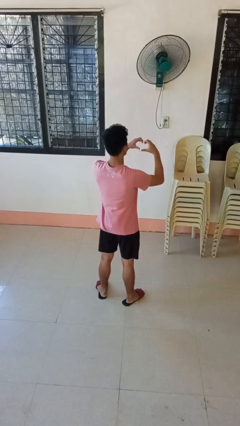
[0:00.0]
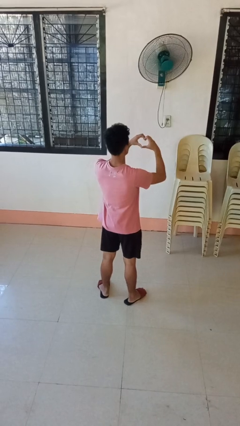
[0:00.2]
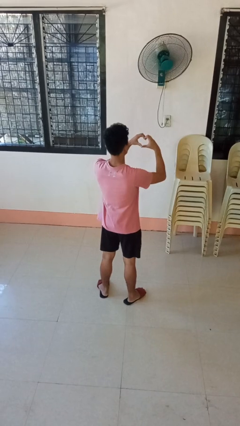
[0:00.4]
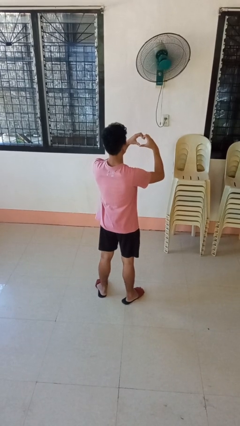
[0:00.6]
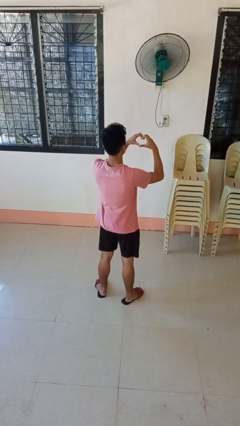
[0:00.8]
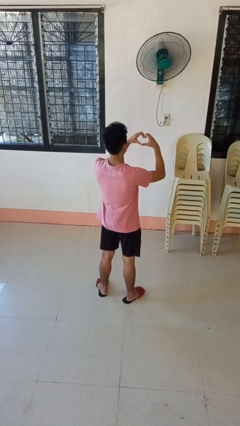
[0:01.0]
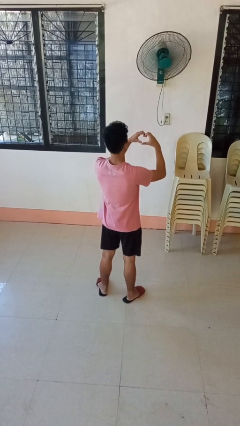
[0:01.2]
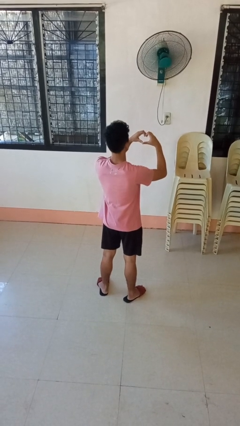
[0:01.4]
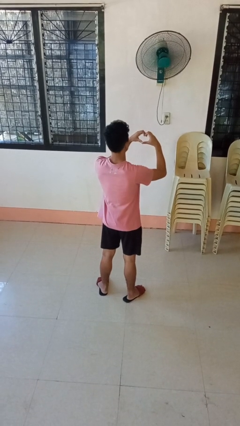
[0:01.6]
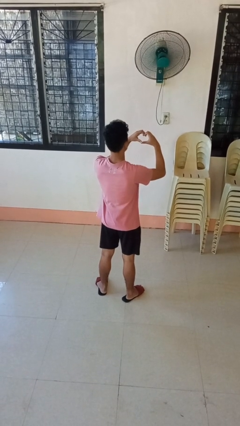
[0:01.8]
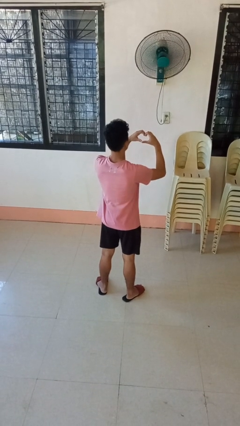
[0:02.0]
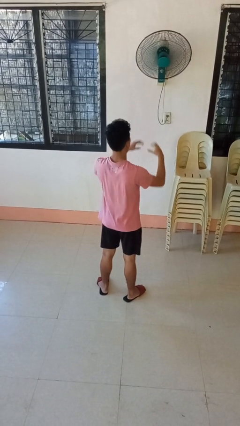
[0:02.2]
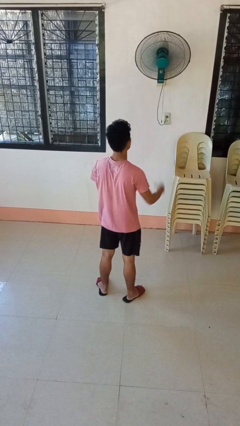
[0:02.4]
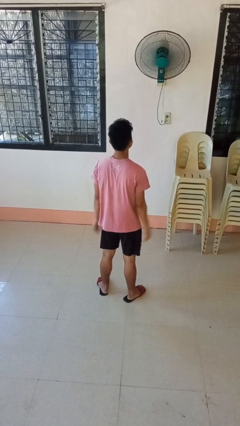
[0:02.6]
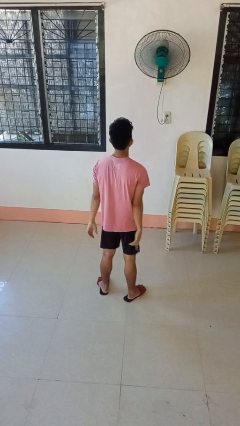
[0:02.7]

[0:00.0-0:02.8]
person gestures heart

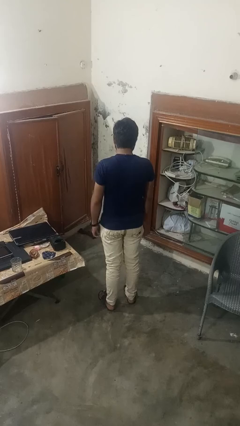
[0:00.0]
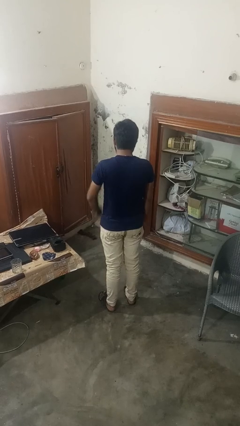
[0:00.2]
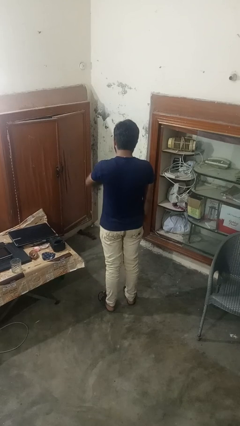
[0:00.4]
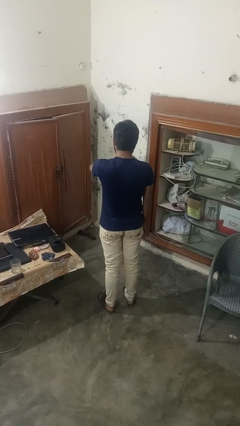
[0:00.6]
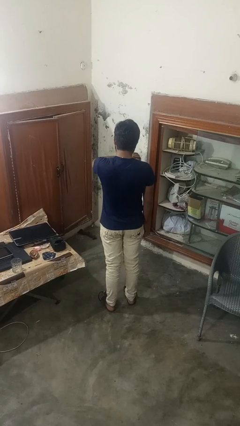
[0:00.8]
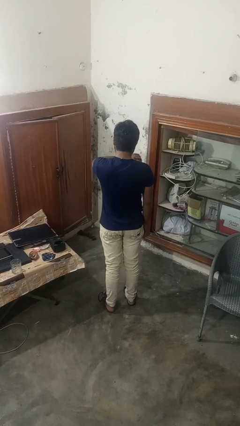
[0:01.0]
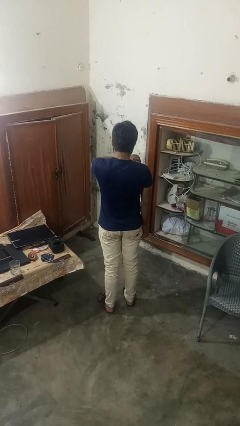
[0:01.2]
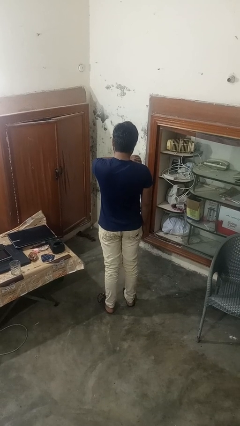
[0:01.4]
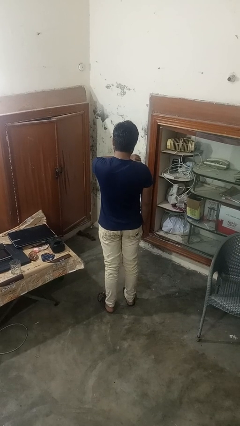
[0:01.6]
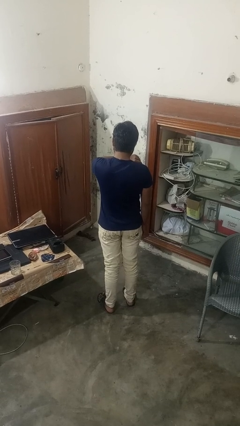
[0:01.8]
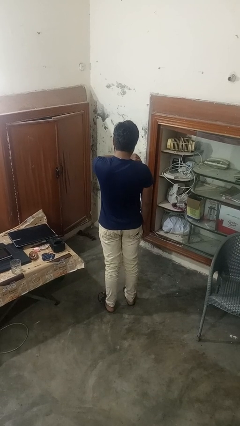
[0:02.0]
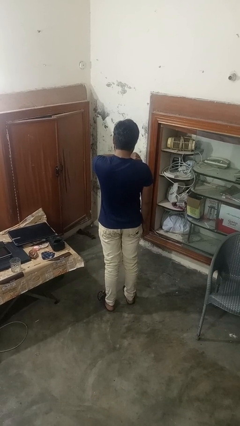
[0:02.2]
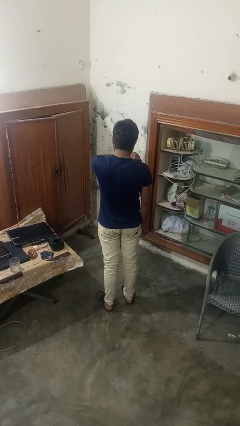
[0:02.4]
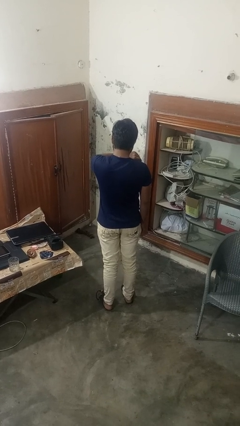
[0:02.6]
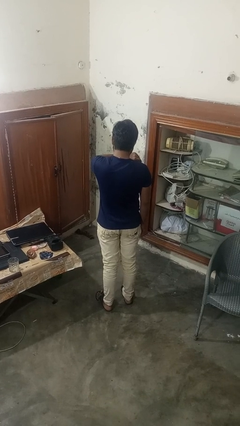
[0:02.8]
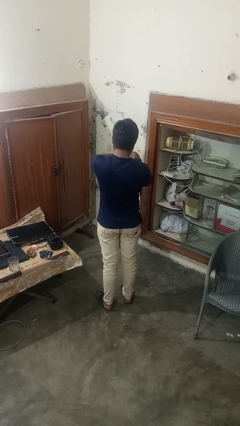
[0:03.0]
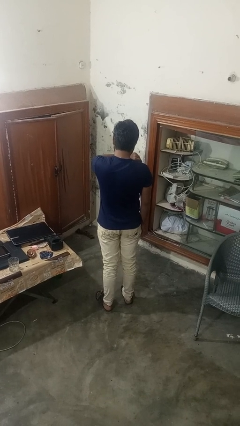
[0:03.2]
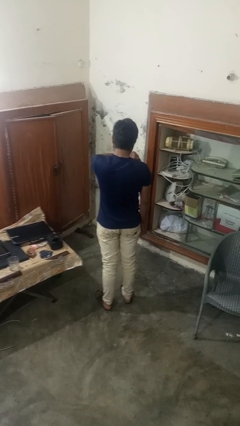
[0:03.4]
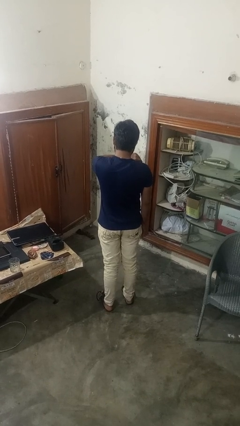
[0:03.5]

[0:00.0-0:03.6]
person looks at wristwatch

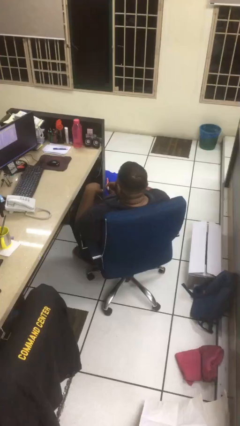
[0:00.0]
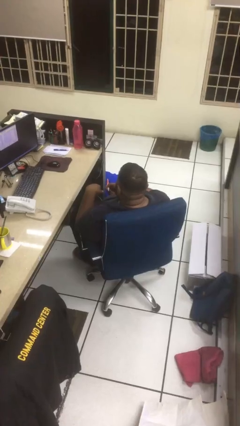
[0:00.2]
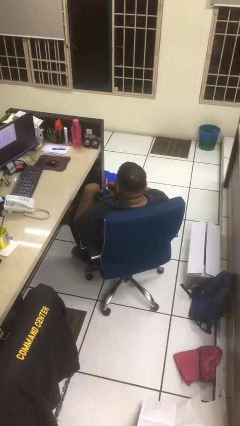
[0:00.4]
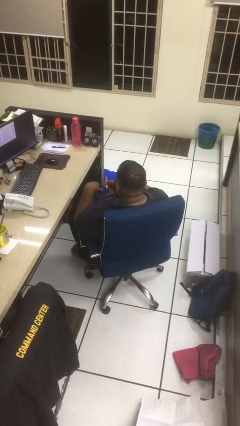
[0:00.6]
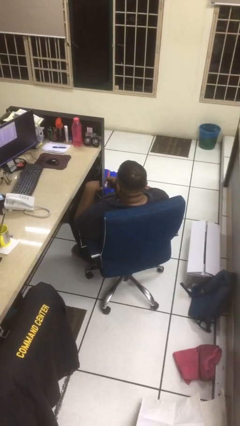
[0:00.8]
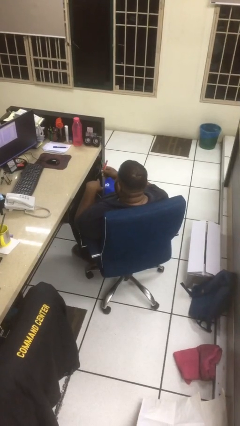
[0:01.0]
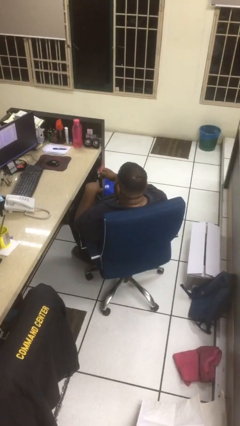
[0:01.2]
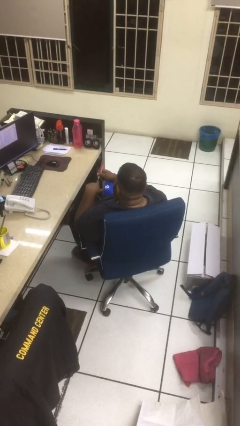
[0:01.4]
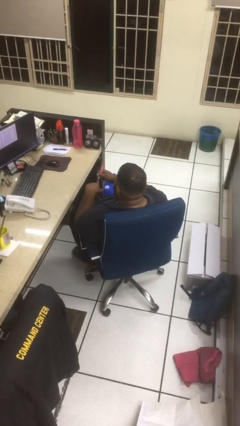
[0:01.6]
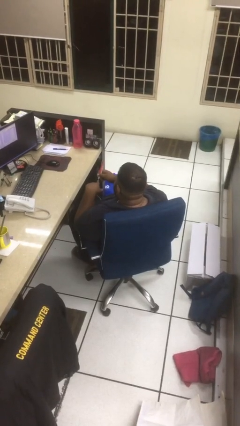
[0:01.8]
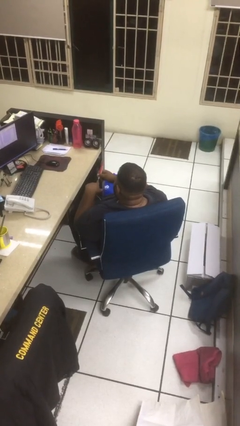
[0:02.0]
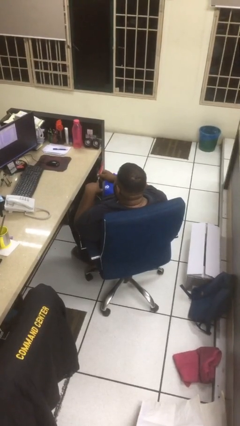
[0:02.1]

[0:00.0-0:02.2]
person paints fingernails

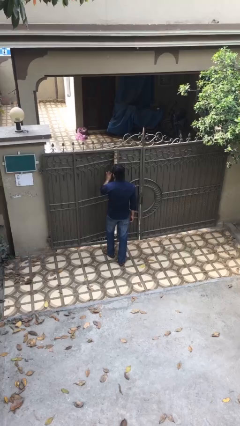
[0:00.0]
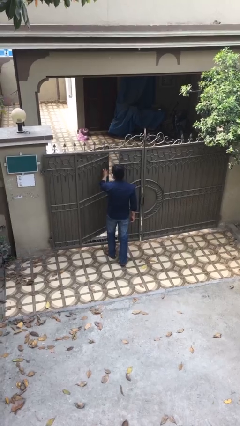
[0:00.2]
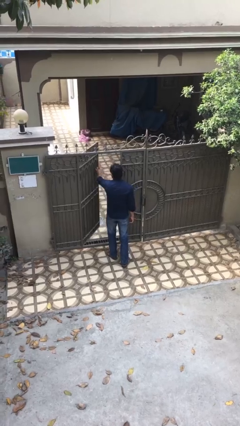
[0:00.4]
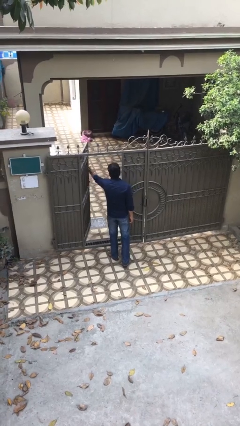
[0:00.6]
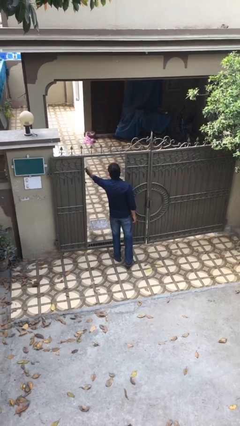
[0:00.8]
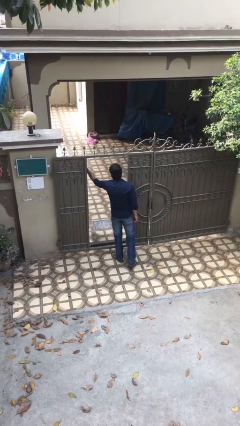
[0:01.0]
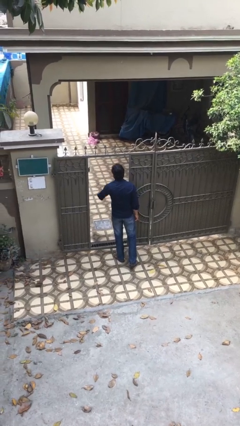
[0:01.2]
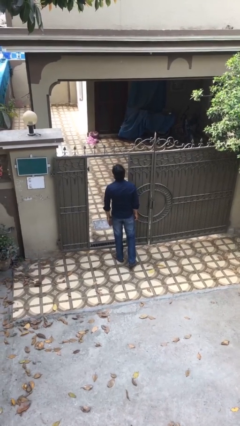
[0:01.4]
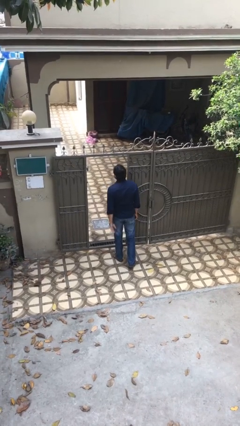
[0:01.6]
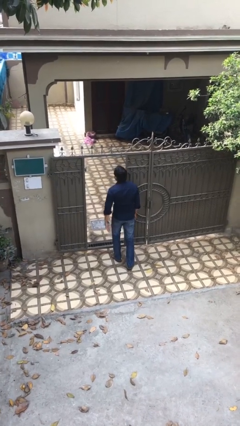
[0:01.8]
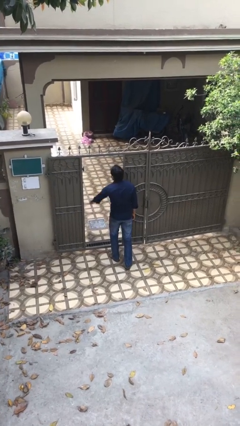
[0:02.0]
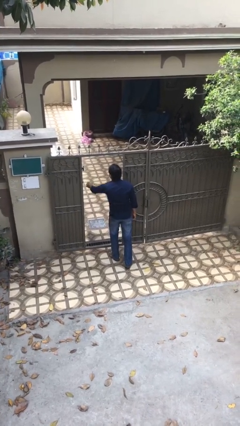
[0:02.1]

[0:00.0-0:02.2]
person opens facility door

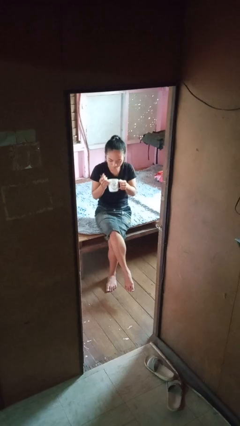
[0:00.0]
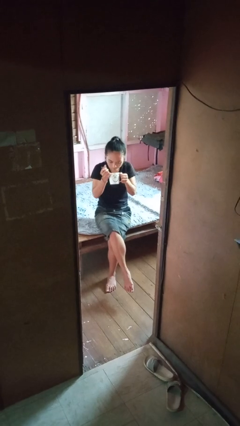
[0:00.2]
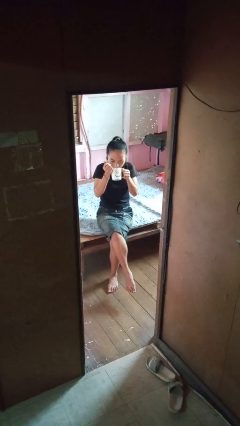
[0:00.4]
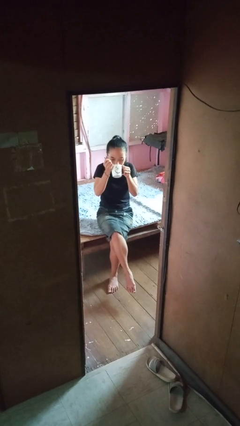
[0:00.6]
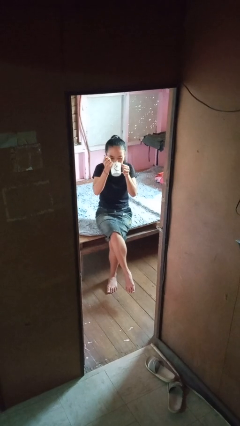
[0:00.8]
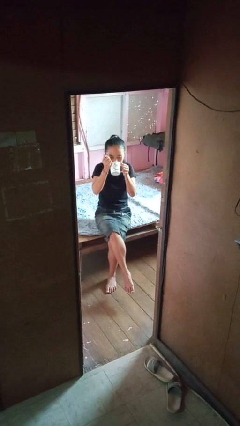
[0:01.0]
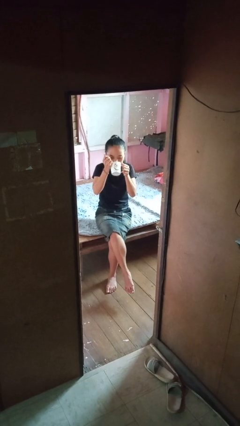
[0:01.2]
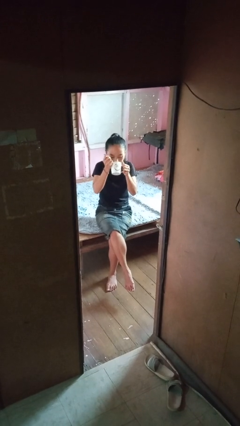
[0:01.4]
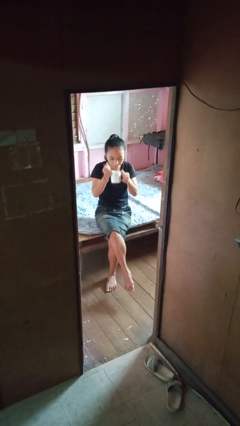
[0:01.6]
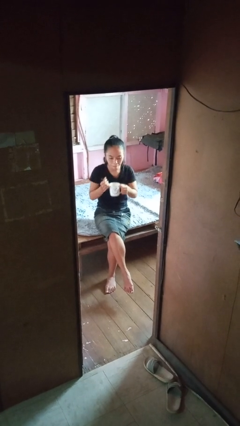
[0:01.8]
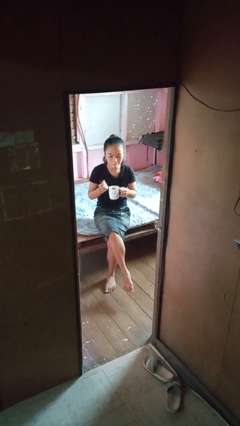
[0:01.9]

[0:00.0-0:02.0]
person drinks from mug

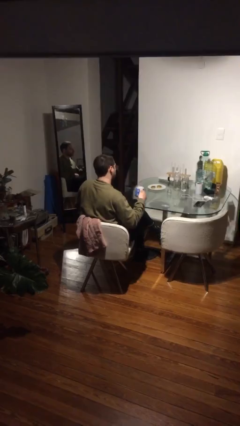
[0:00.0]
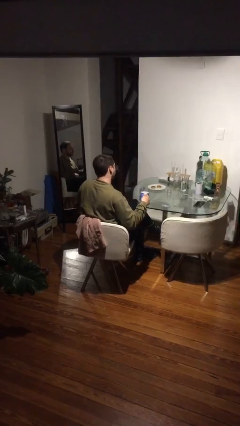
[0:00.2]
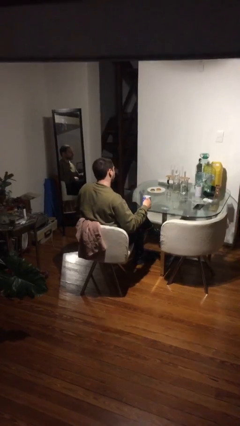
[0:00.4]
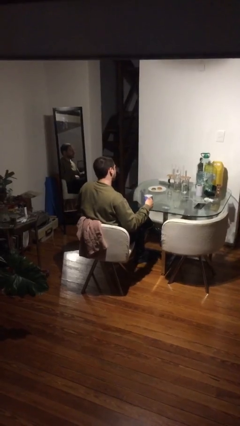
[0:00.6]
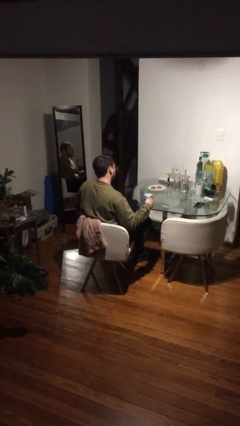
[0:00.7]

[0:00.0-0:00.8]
person puts down object on table

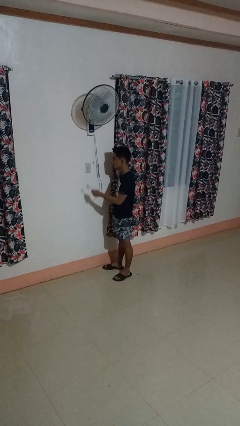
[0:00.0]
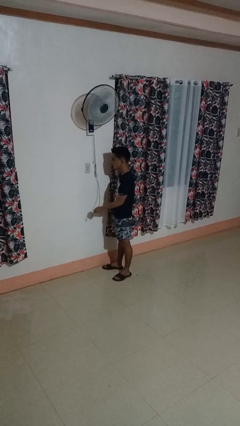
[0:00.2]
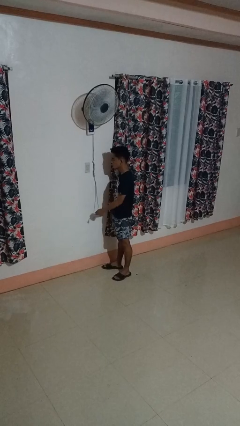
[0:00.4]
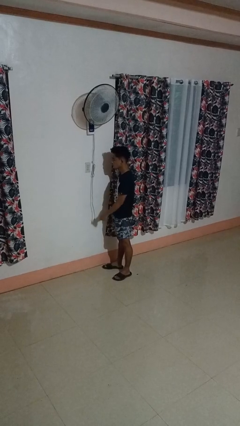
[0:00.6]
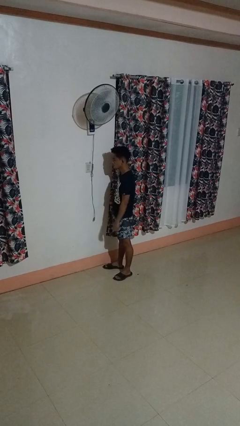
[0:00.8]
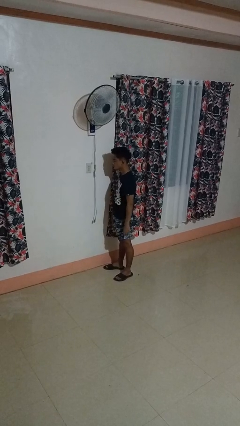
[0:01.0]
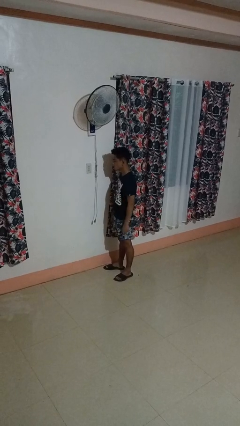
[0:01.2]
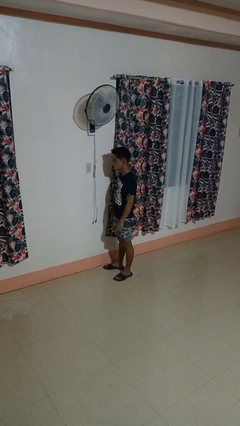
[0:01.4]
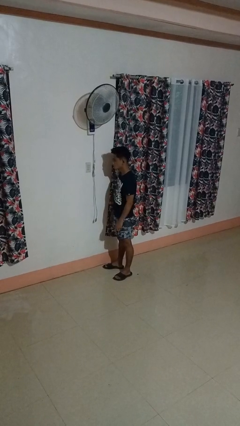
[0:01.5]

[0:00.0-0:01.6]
person unplugs from electrical socket

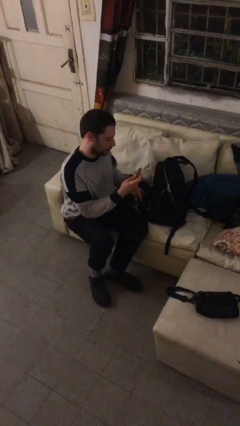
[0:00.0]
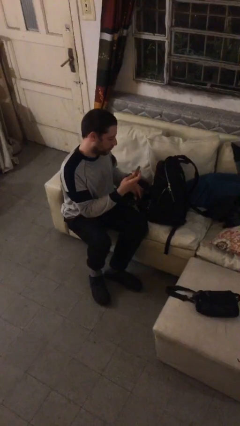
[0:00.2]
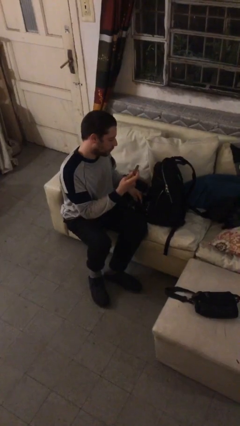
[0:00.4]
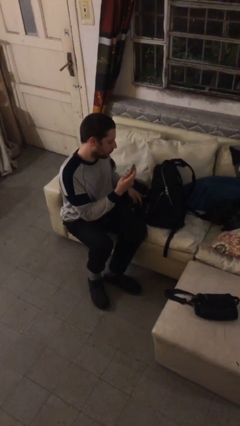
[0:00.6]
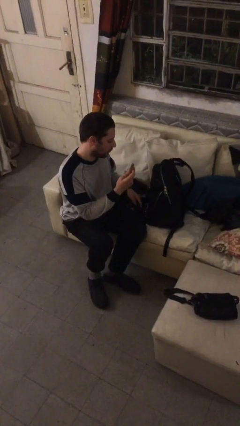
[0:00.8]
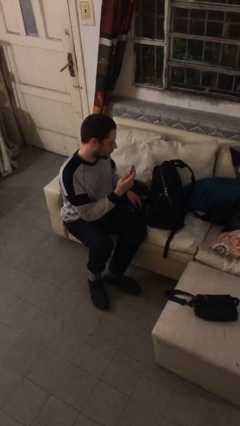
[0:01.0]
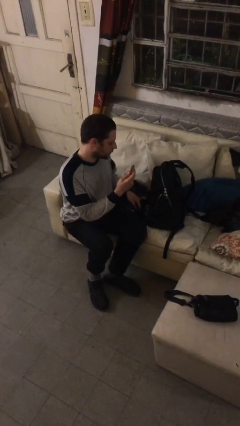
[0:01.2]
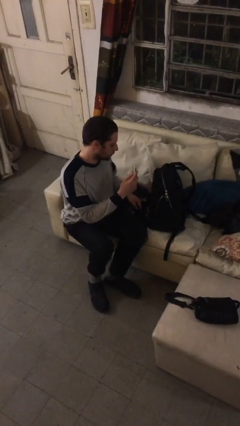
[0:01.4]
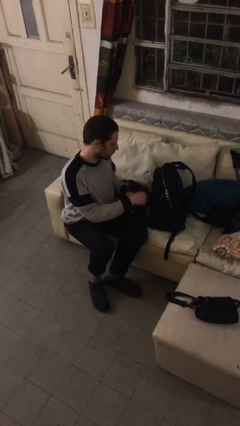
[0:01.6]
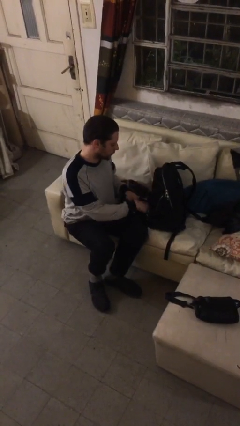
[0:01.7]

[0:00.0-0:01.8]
person takes object from backpack
